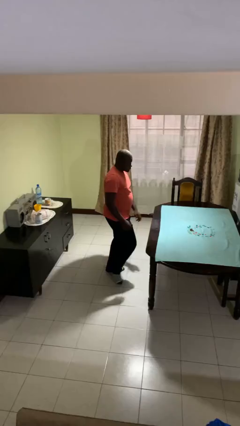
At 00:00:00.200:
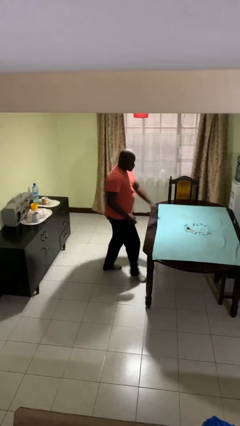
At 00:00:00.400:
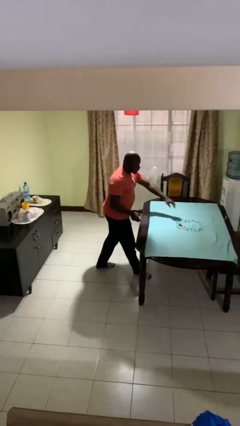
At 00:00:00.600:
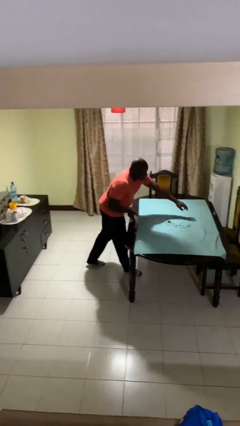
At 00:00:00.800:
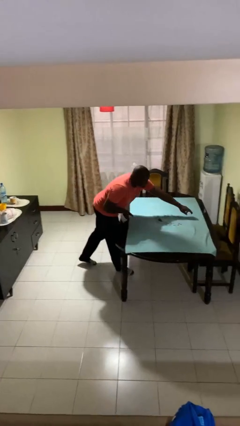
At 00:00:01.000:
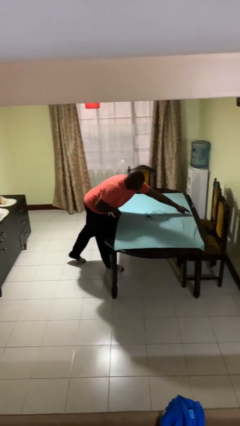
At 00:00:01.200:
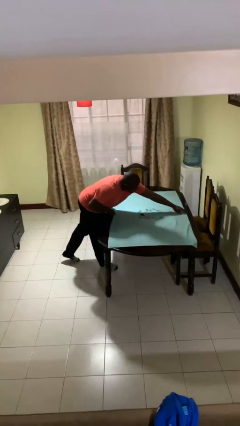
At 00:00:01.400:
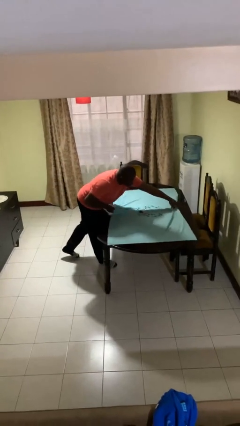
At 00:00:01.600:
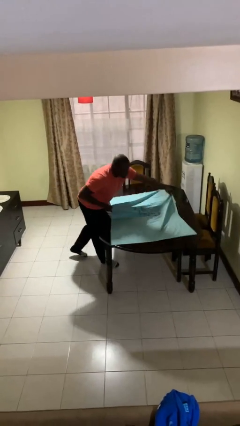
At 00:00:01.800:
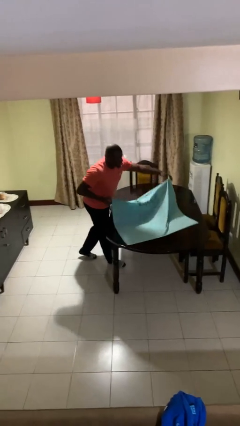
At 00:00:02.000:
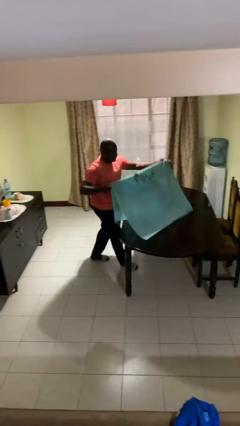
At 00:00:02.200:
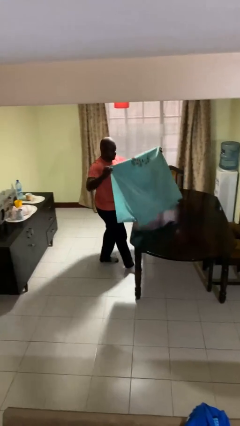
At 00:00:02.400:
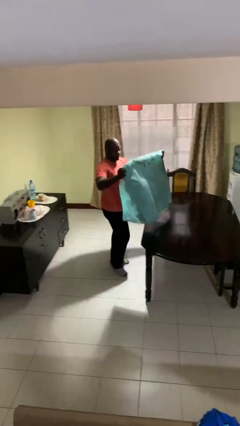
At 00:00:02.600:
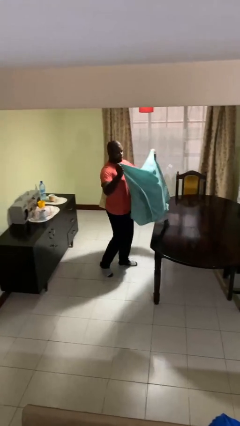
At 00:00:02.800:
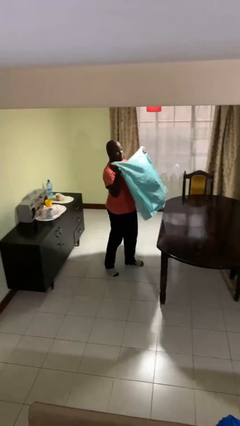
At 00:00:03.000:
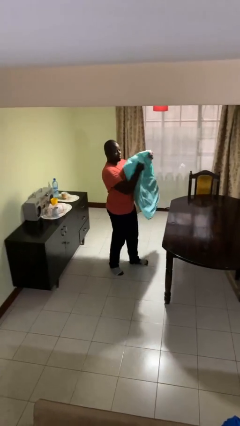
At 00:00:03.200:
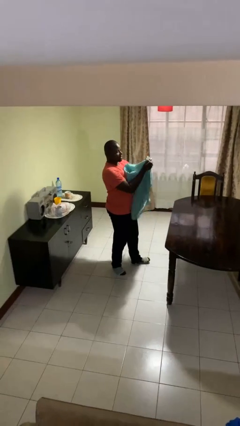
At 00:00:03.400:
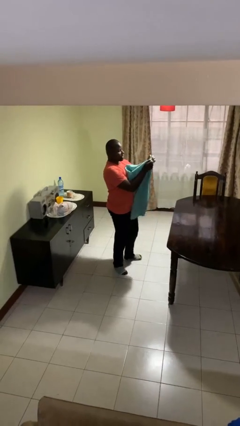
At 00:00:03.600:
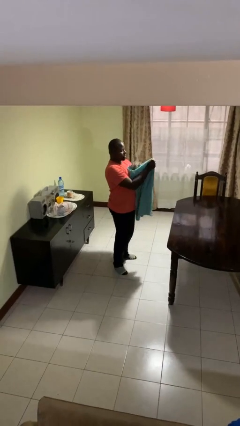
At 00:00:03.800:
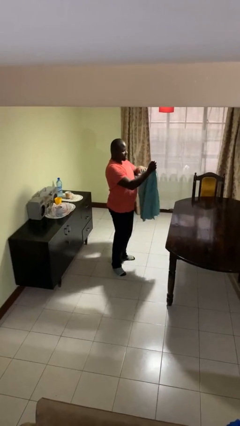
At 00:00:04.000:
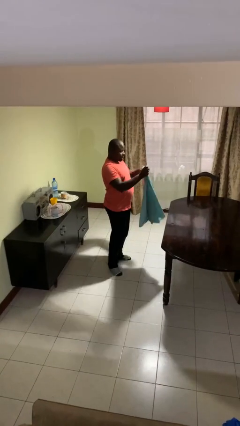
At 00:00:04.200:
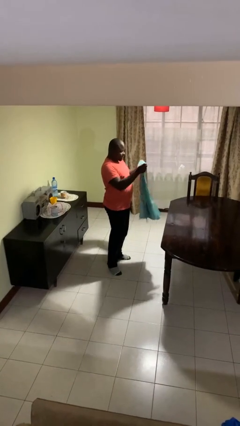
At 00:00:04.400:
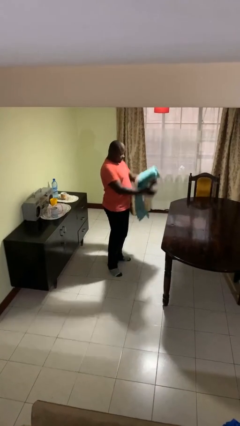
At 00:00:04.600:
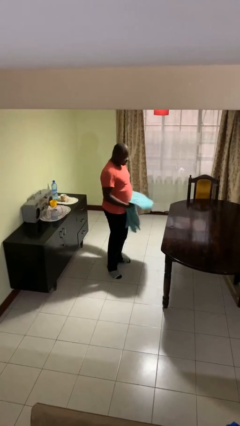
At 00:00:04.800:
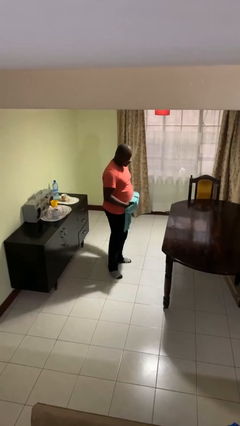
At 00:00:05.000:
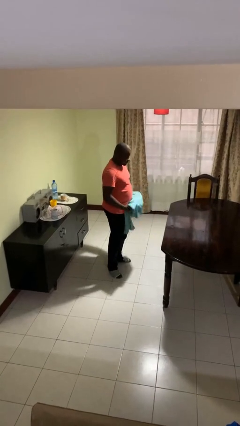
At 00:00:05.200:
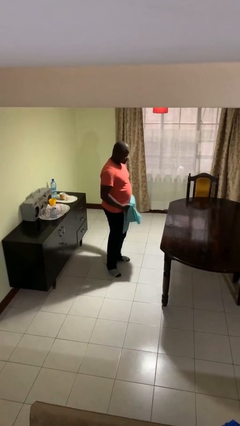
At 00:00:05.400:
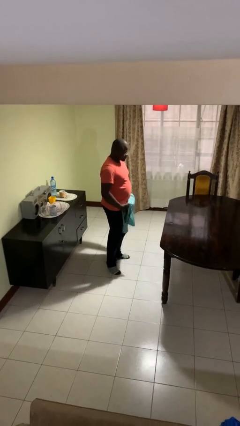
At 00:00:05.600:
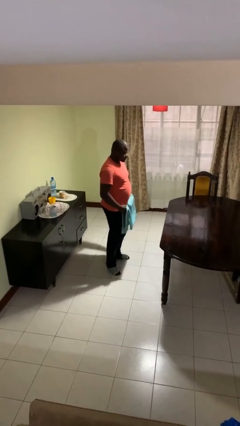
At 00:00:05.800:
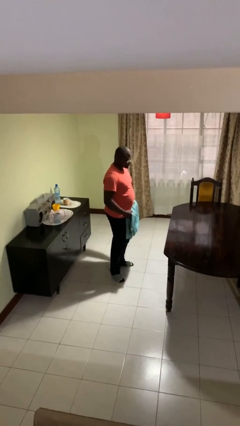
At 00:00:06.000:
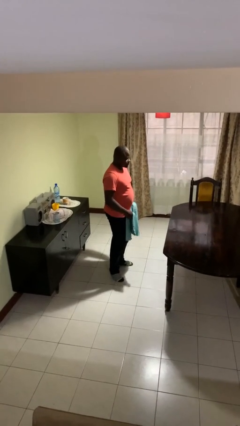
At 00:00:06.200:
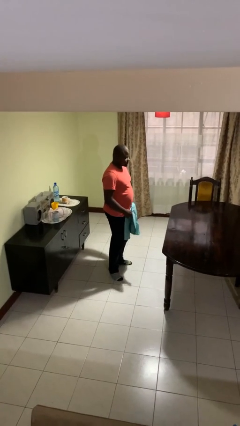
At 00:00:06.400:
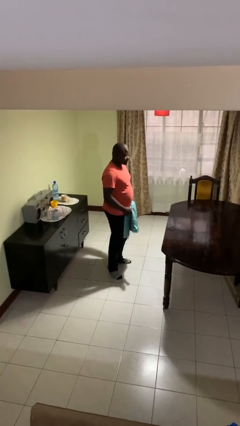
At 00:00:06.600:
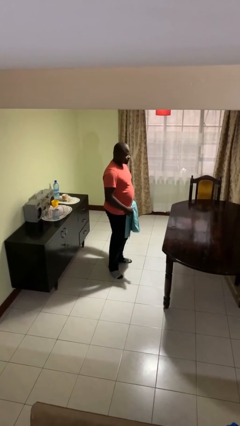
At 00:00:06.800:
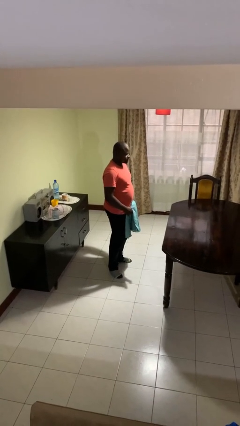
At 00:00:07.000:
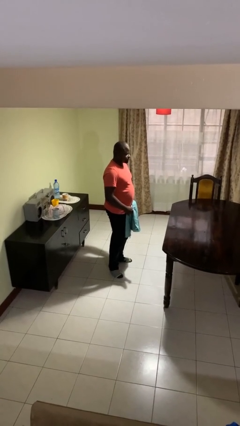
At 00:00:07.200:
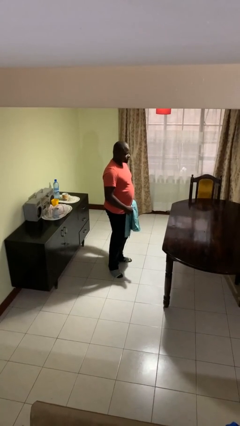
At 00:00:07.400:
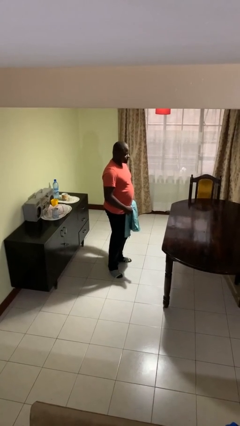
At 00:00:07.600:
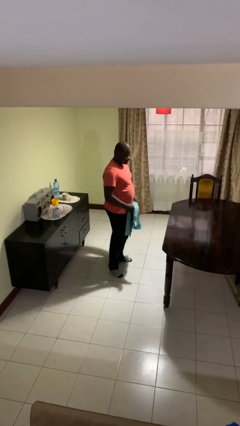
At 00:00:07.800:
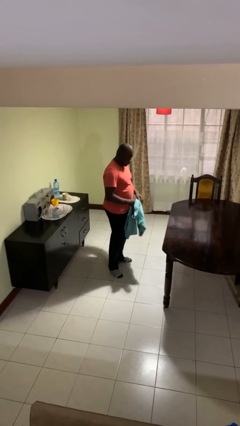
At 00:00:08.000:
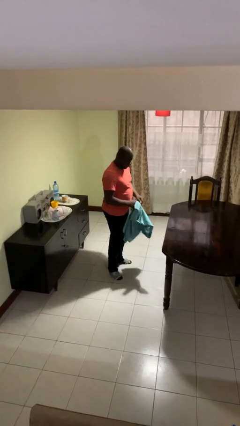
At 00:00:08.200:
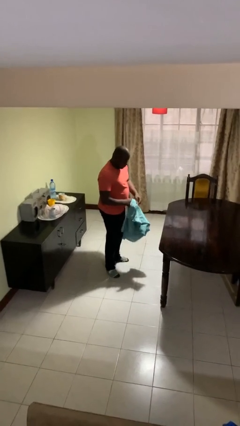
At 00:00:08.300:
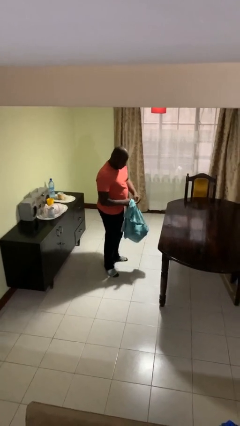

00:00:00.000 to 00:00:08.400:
person folds tablecloth

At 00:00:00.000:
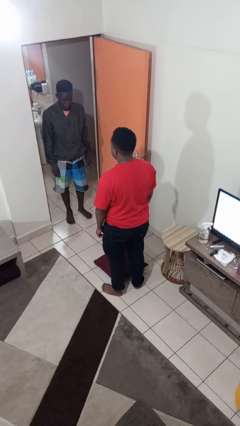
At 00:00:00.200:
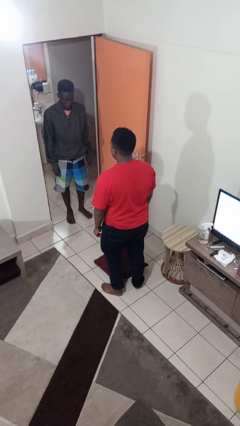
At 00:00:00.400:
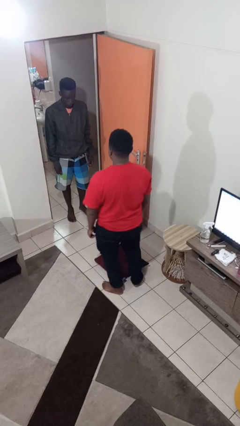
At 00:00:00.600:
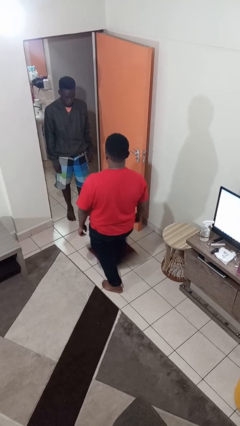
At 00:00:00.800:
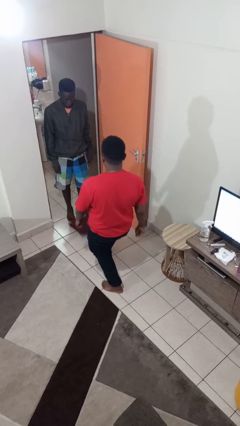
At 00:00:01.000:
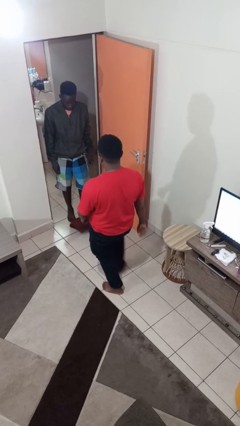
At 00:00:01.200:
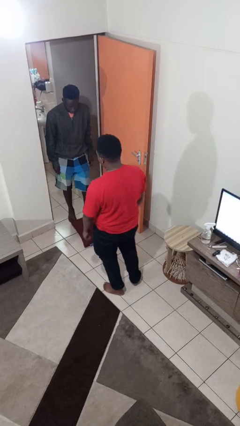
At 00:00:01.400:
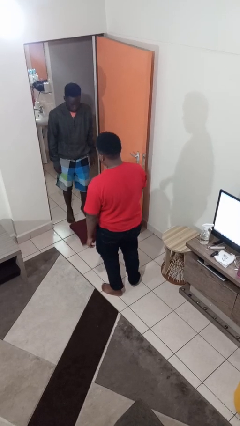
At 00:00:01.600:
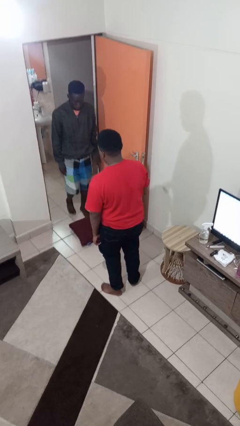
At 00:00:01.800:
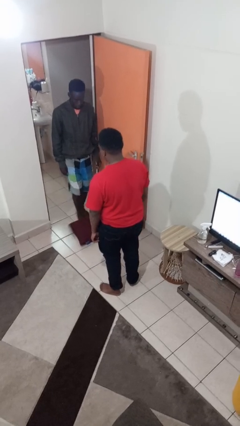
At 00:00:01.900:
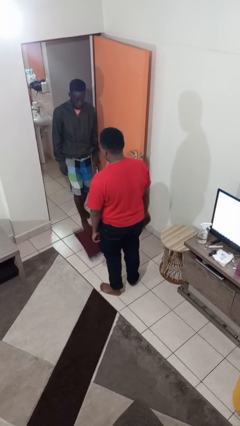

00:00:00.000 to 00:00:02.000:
person kicks object to person

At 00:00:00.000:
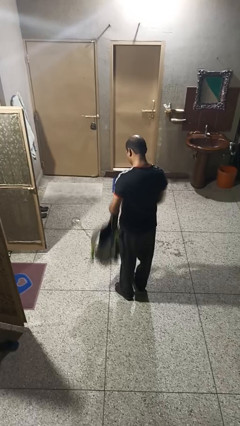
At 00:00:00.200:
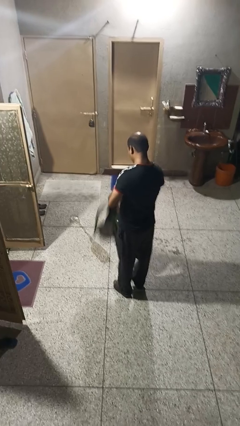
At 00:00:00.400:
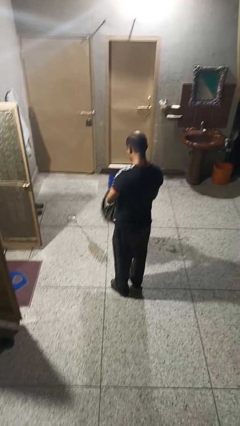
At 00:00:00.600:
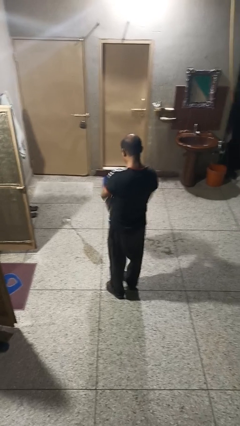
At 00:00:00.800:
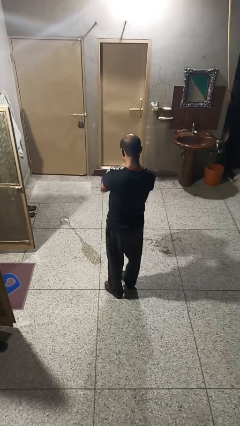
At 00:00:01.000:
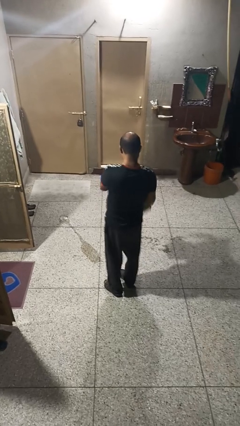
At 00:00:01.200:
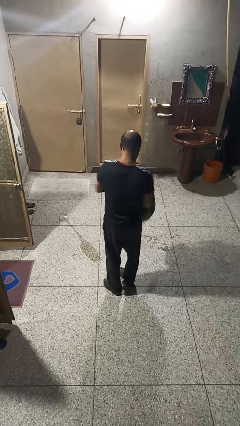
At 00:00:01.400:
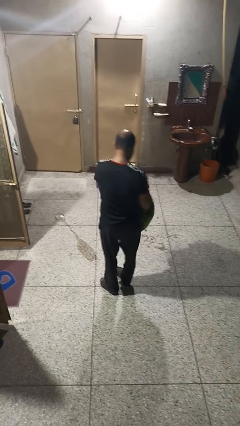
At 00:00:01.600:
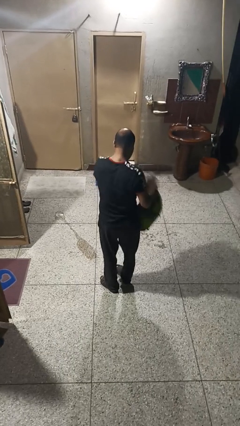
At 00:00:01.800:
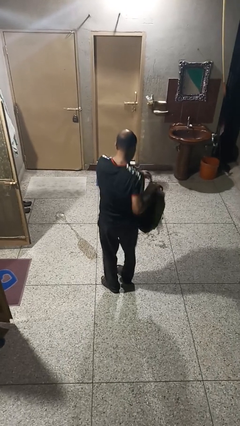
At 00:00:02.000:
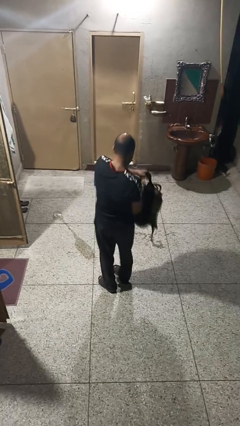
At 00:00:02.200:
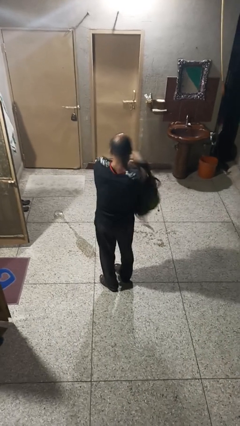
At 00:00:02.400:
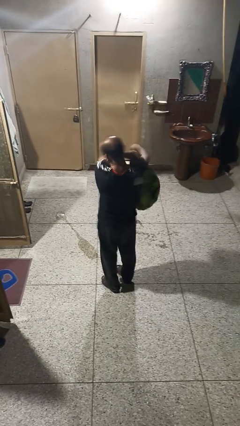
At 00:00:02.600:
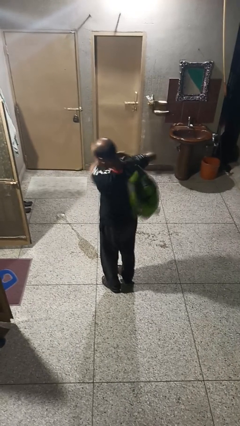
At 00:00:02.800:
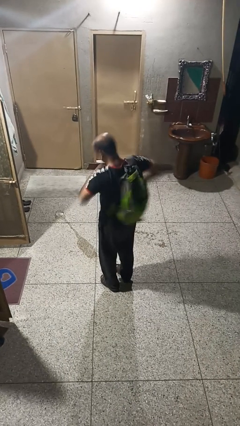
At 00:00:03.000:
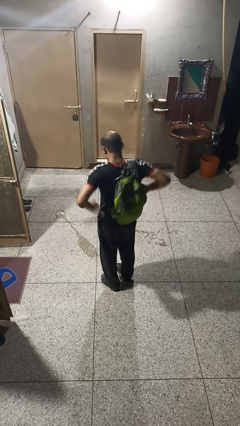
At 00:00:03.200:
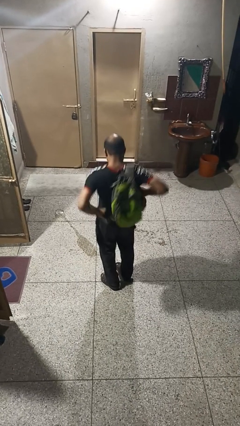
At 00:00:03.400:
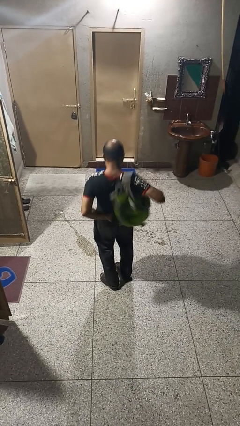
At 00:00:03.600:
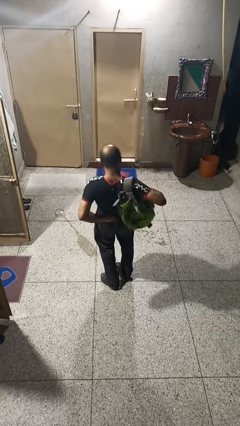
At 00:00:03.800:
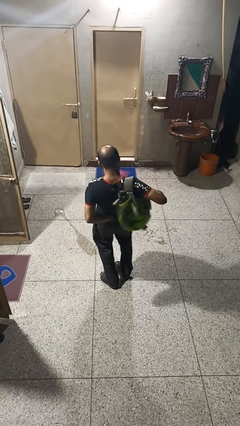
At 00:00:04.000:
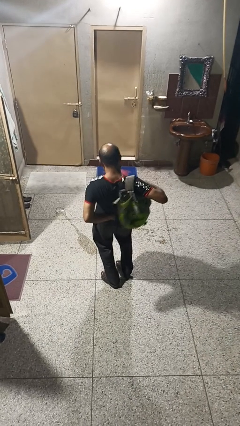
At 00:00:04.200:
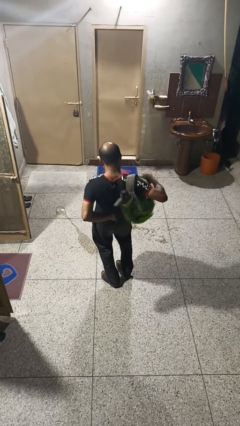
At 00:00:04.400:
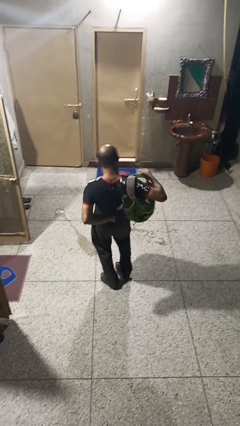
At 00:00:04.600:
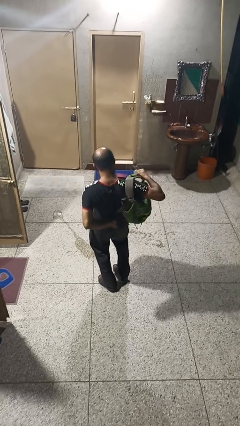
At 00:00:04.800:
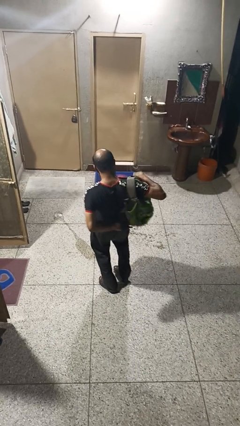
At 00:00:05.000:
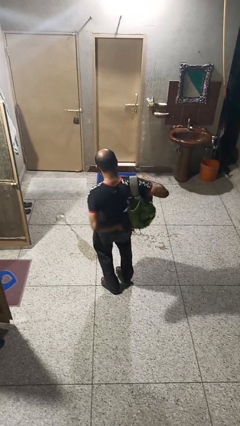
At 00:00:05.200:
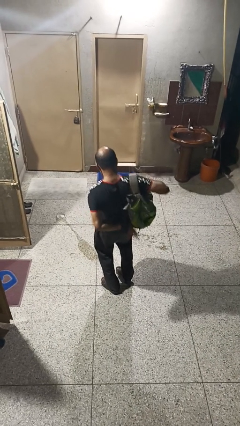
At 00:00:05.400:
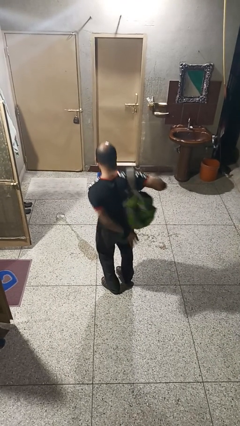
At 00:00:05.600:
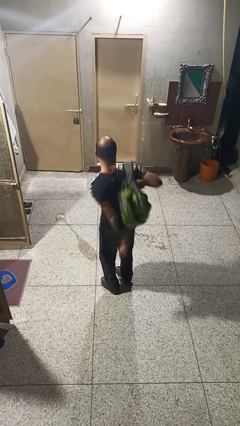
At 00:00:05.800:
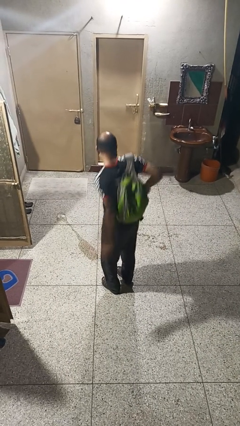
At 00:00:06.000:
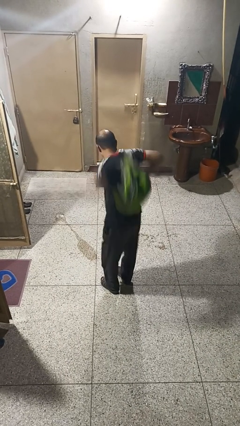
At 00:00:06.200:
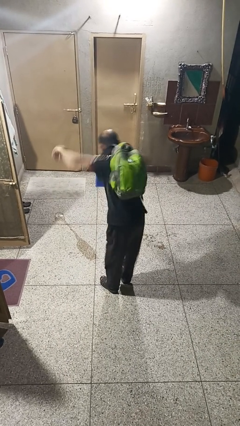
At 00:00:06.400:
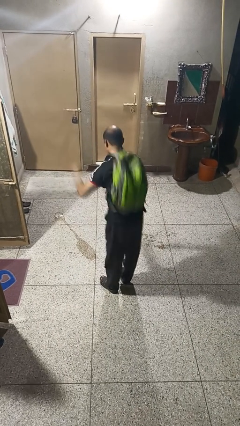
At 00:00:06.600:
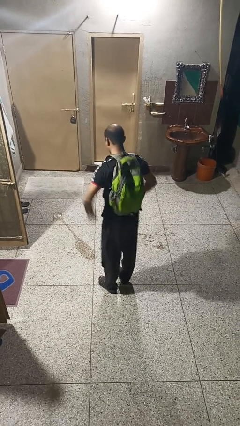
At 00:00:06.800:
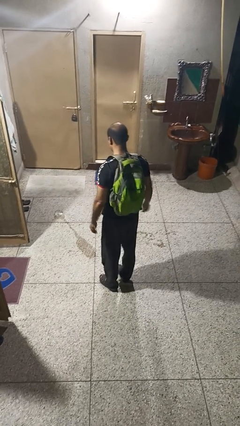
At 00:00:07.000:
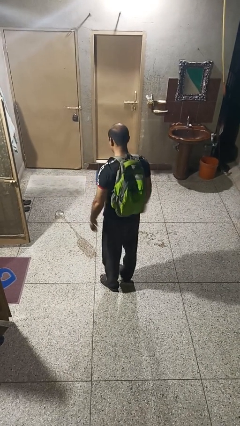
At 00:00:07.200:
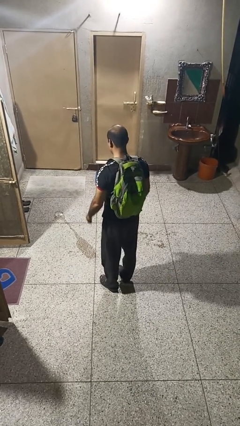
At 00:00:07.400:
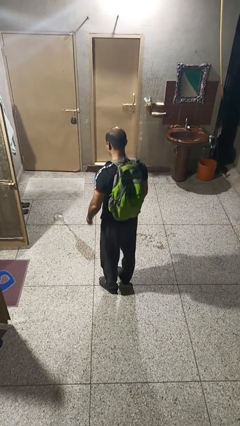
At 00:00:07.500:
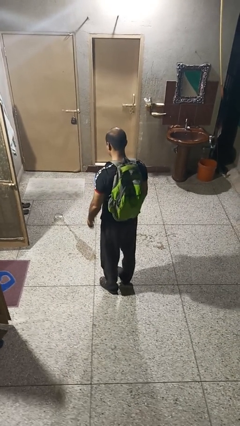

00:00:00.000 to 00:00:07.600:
person puts on backpack
